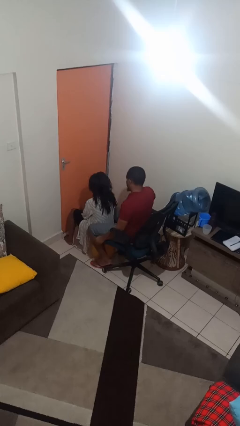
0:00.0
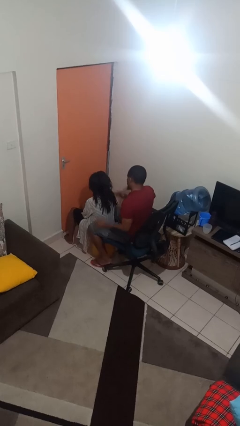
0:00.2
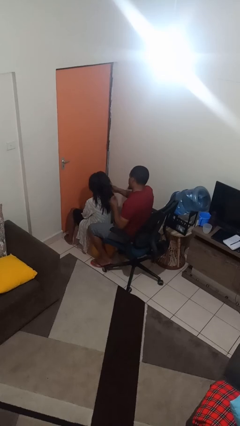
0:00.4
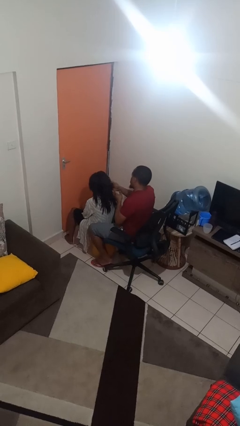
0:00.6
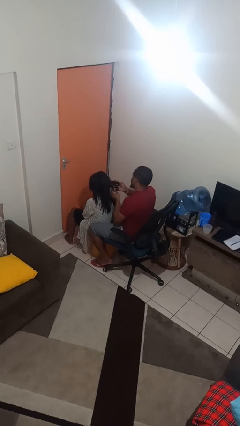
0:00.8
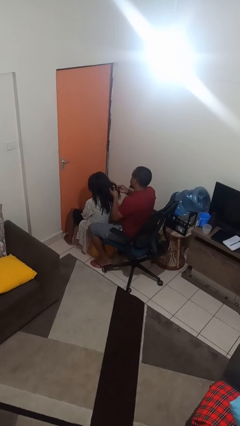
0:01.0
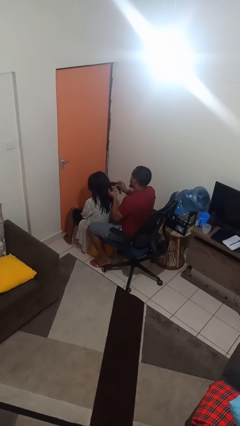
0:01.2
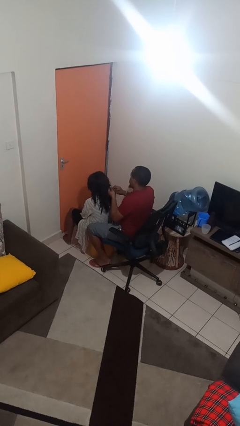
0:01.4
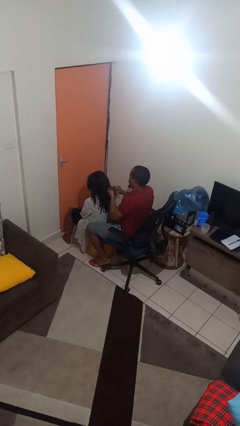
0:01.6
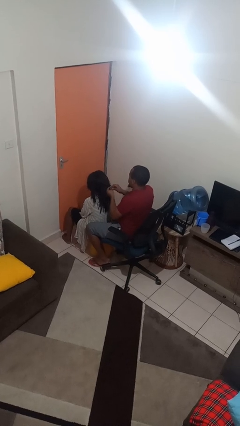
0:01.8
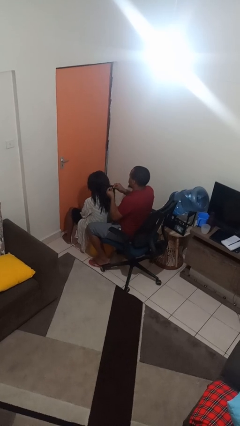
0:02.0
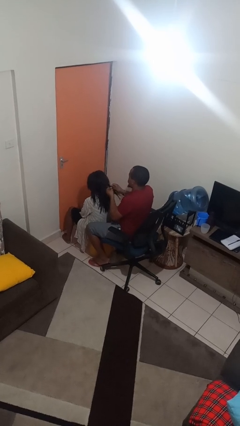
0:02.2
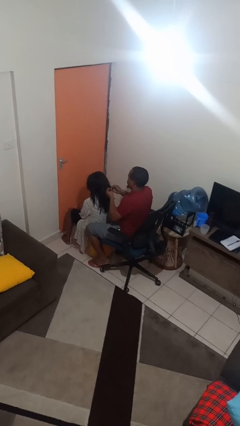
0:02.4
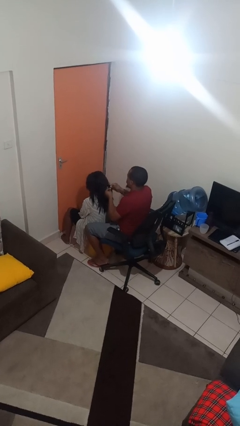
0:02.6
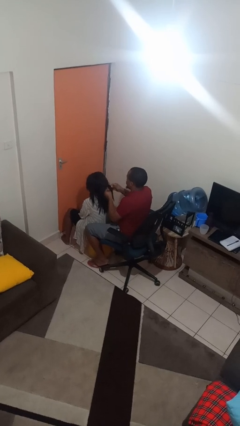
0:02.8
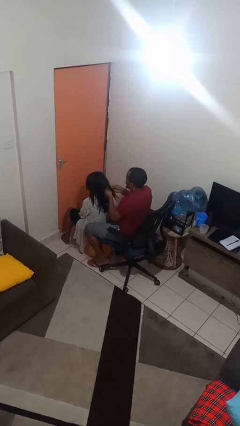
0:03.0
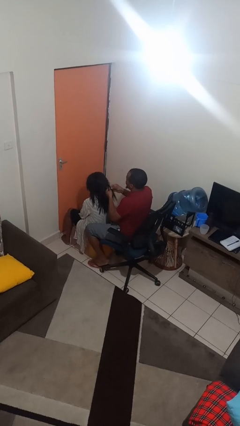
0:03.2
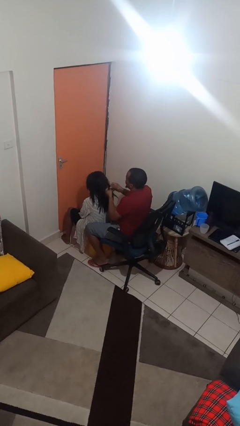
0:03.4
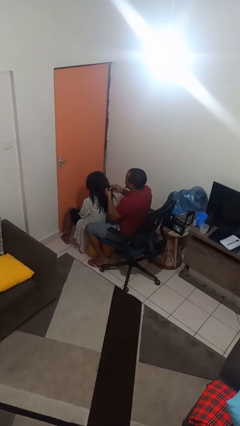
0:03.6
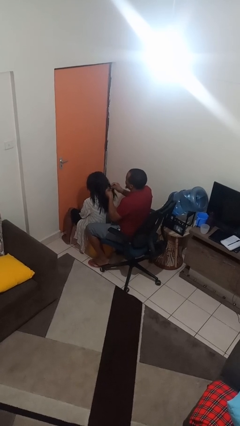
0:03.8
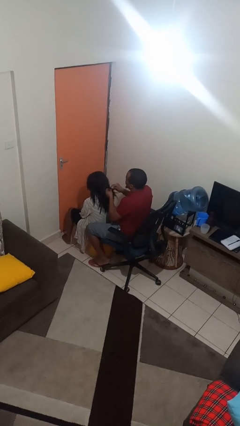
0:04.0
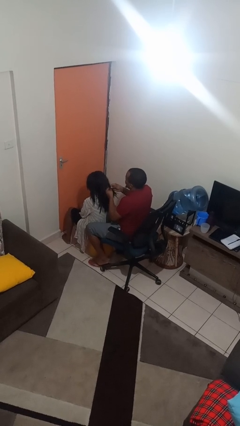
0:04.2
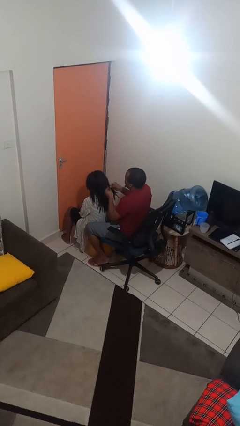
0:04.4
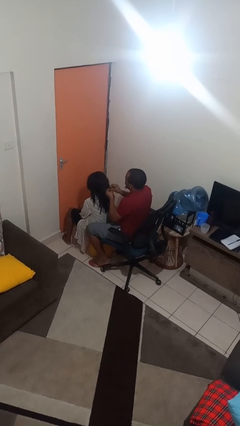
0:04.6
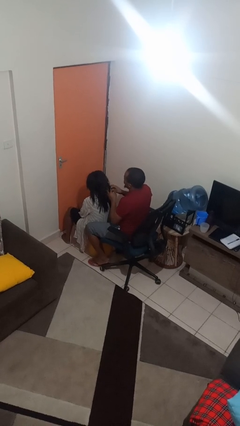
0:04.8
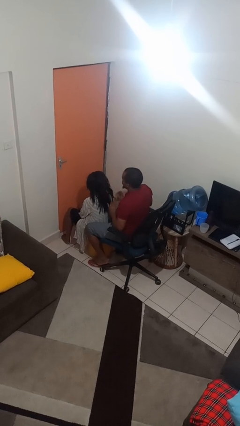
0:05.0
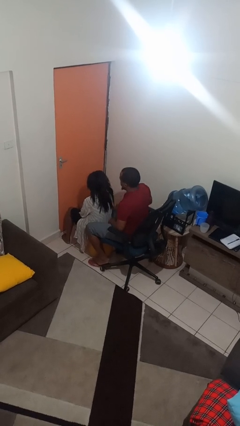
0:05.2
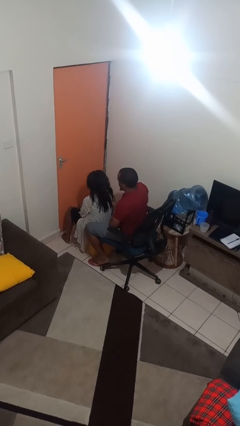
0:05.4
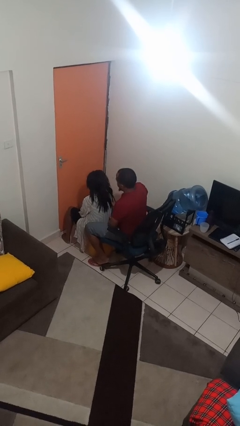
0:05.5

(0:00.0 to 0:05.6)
person braids hair of person

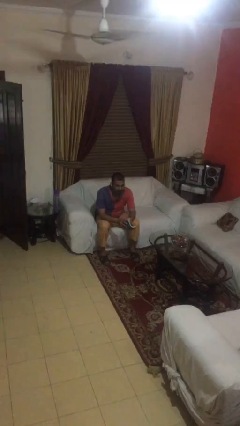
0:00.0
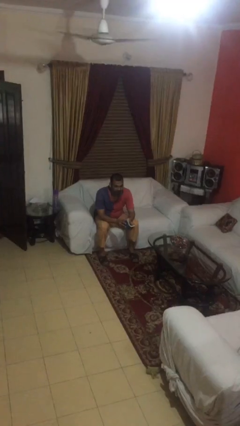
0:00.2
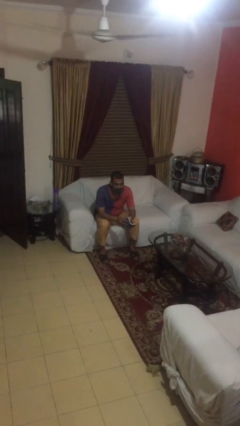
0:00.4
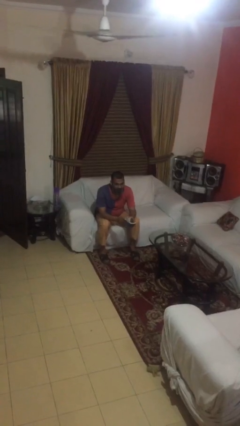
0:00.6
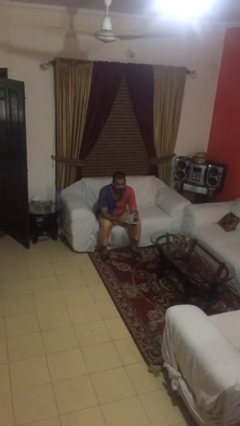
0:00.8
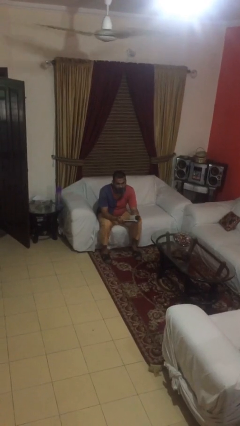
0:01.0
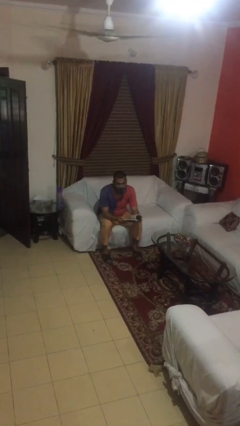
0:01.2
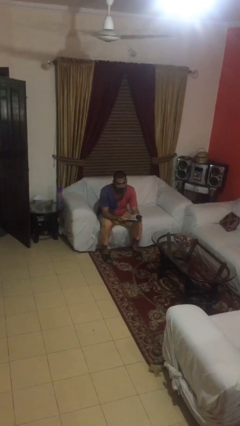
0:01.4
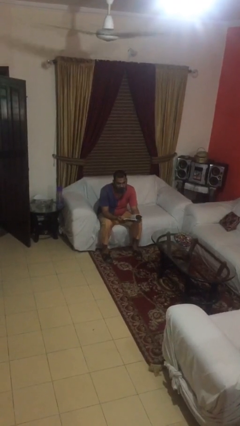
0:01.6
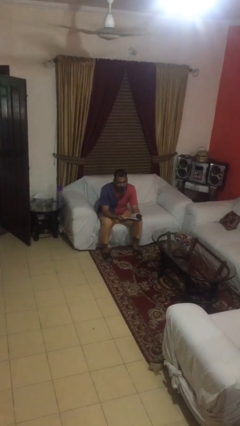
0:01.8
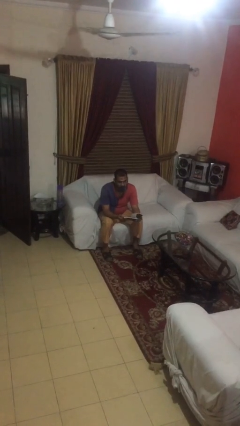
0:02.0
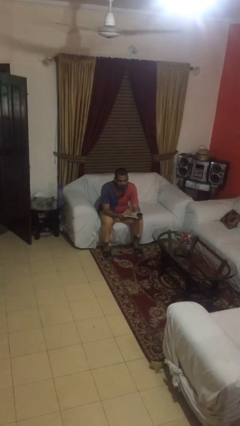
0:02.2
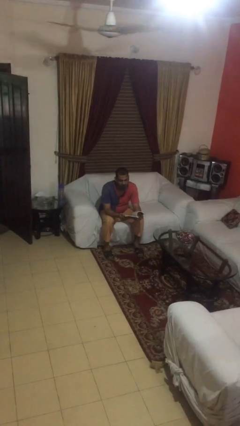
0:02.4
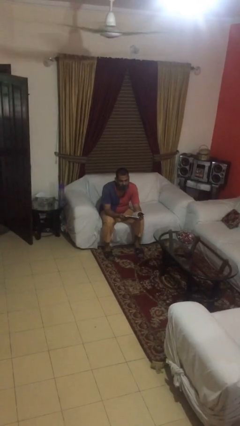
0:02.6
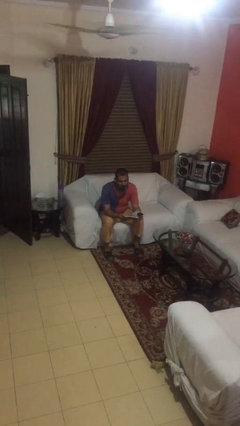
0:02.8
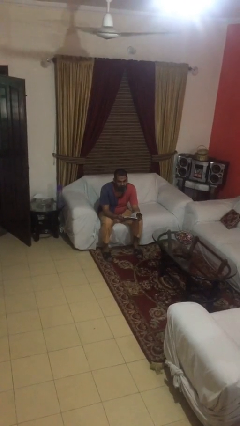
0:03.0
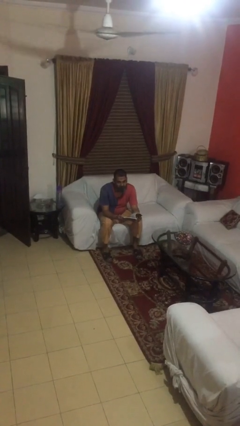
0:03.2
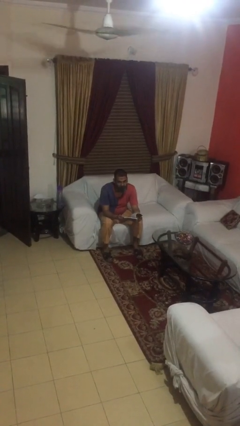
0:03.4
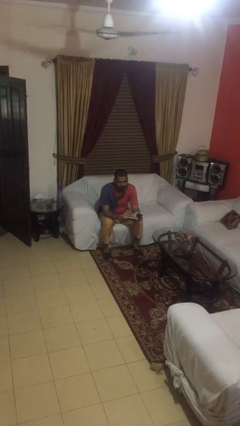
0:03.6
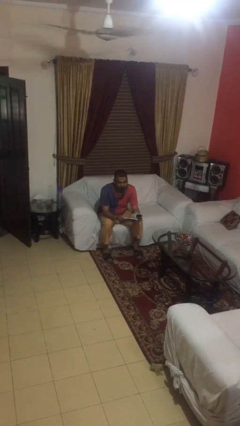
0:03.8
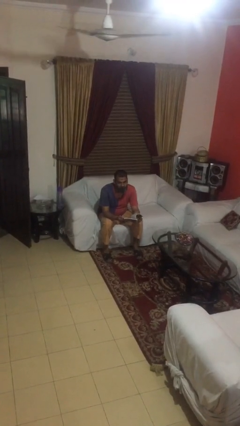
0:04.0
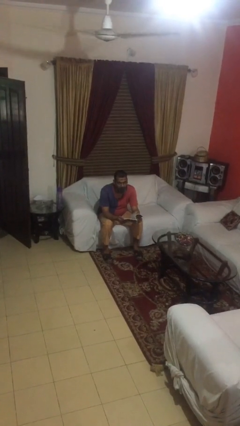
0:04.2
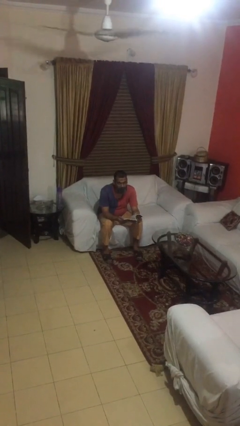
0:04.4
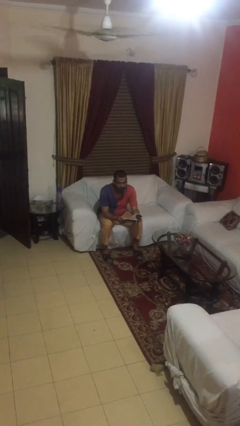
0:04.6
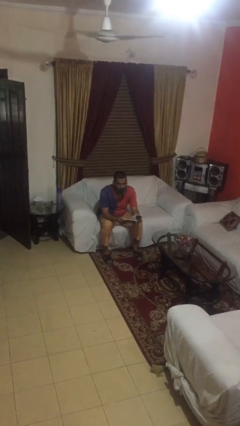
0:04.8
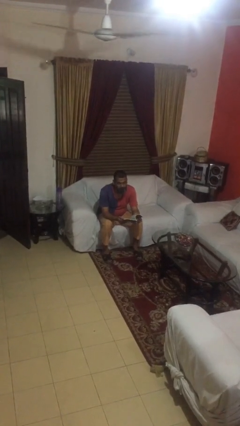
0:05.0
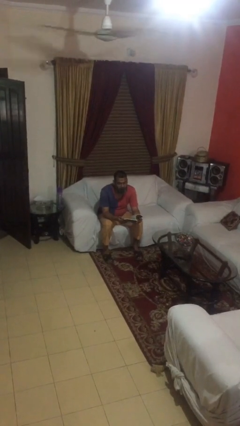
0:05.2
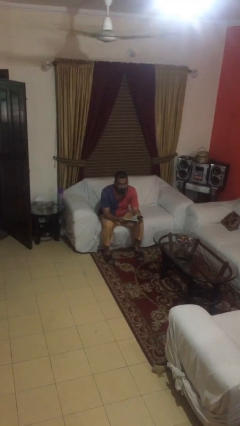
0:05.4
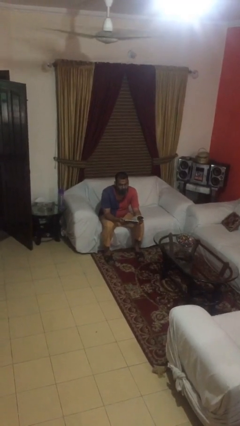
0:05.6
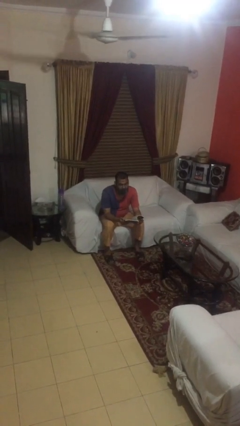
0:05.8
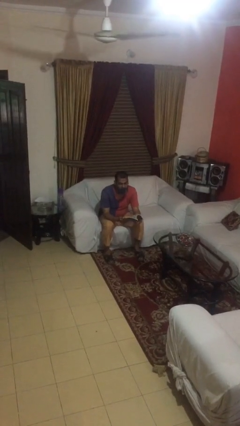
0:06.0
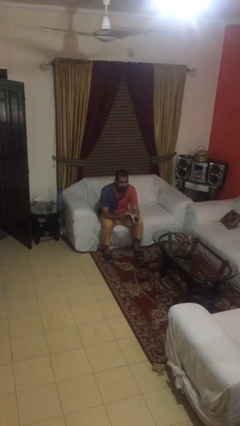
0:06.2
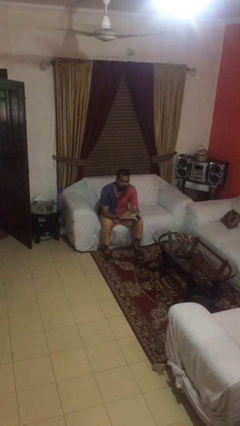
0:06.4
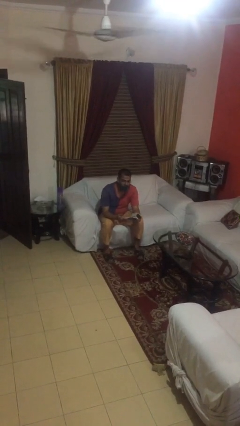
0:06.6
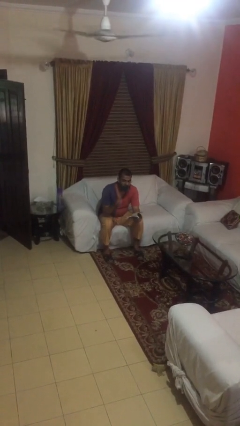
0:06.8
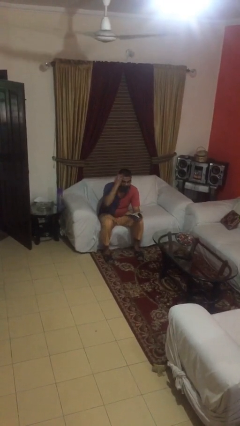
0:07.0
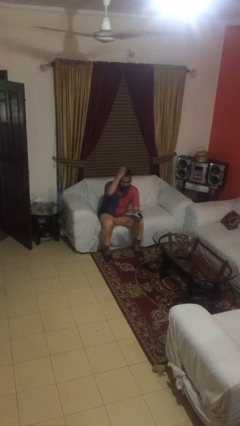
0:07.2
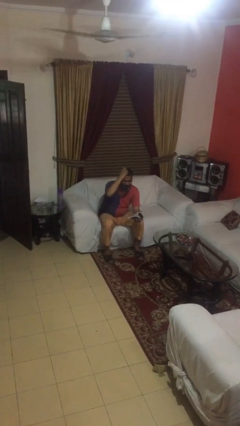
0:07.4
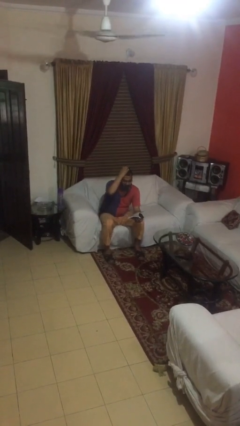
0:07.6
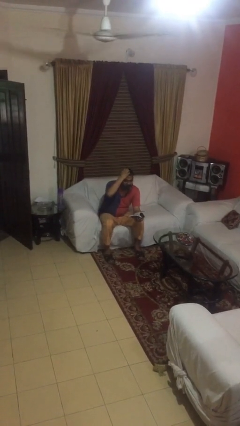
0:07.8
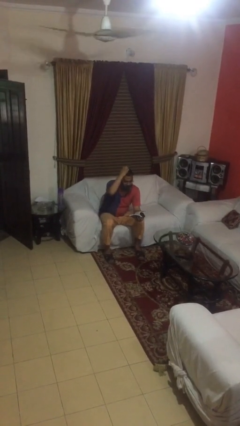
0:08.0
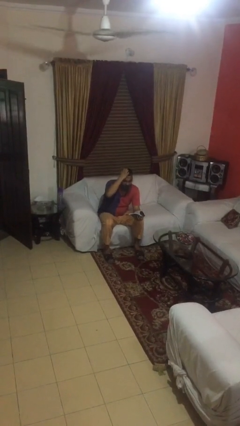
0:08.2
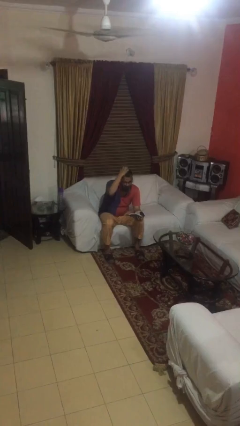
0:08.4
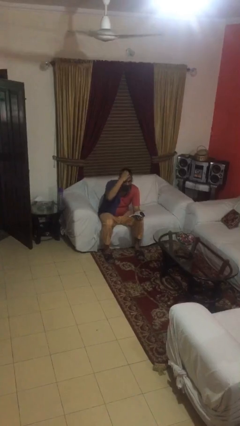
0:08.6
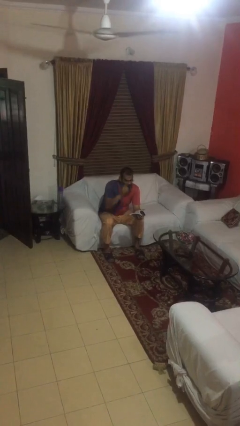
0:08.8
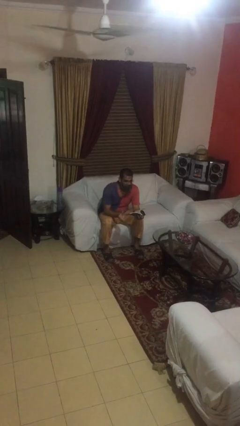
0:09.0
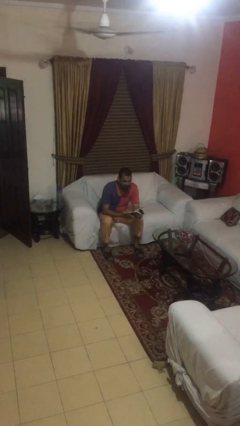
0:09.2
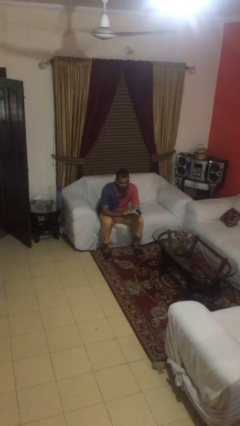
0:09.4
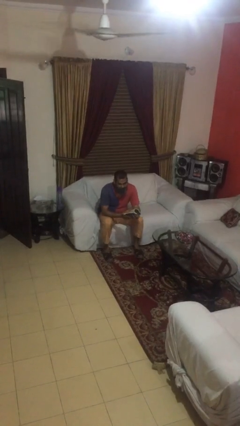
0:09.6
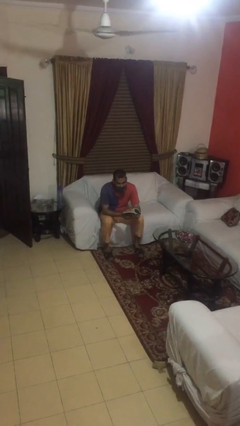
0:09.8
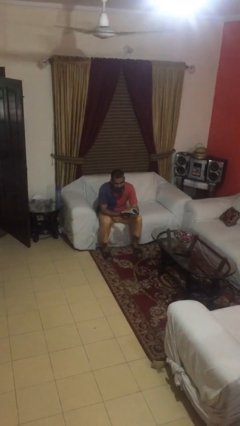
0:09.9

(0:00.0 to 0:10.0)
person reads document

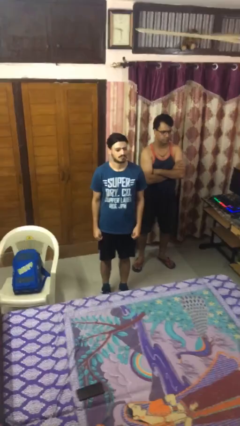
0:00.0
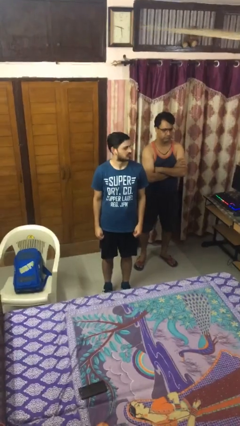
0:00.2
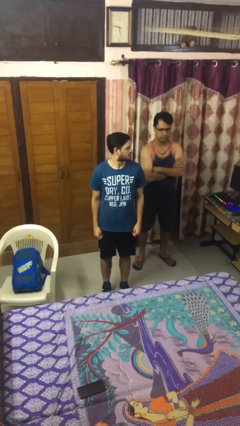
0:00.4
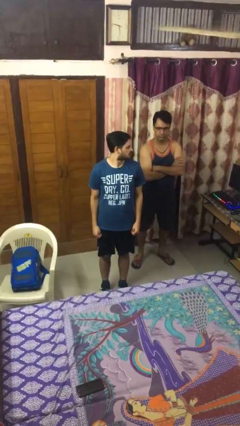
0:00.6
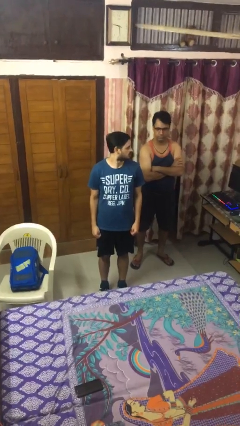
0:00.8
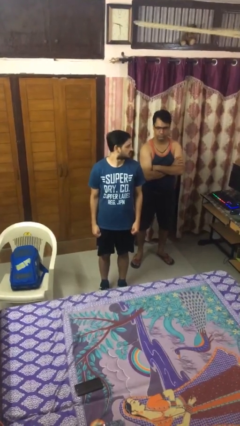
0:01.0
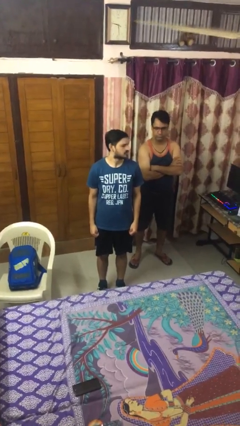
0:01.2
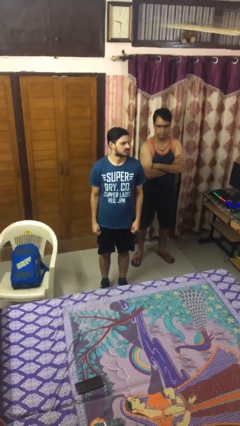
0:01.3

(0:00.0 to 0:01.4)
person looks over shoulder

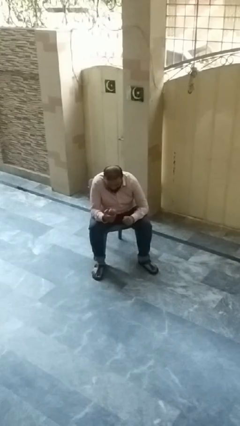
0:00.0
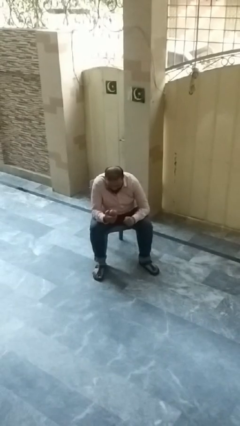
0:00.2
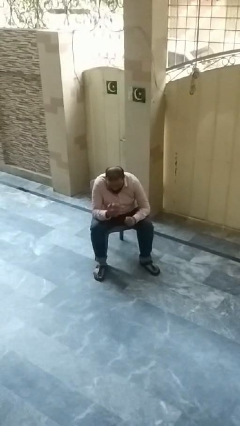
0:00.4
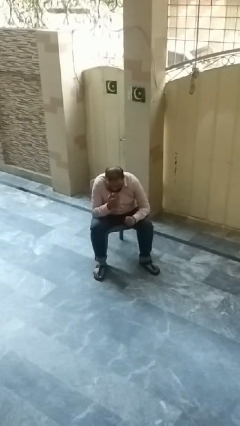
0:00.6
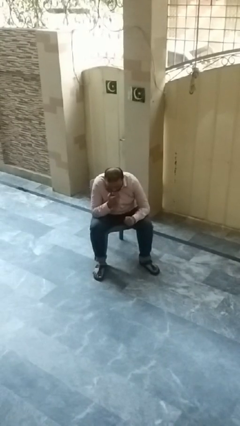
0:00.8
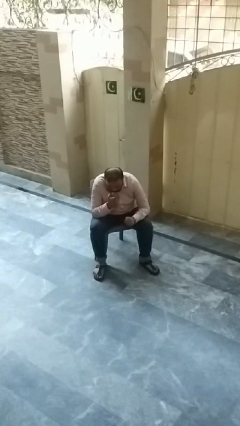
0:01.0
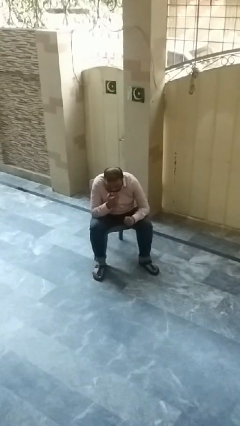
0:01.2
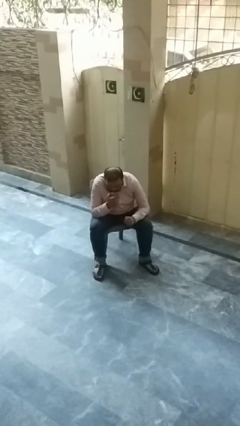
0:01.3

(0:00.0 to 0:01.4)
person eats apple
